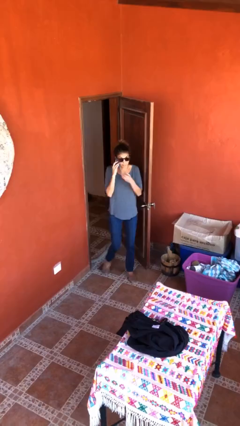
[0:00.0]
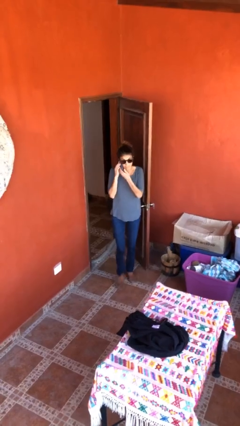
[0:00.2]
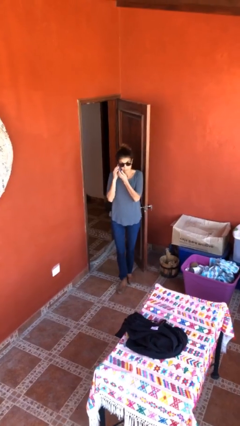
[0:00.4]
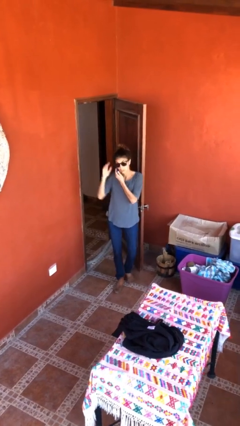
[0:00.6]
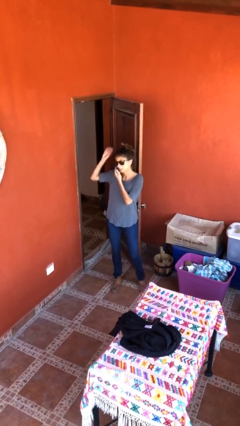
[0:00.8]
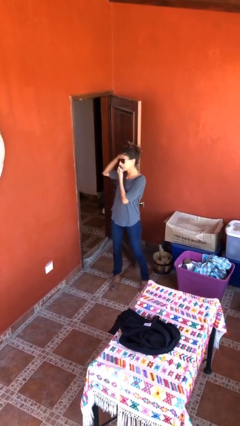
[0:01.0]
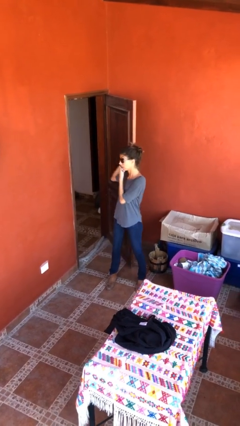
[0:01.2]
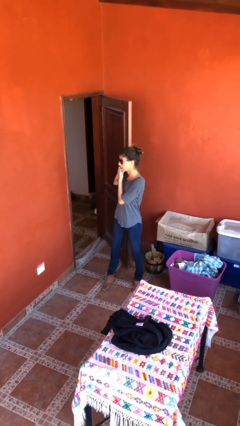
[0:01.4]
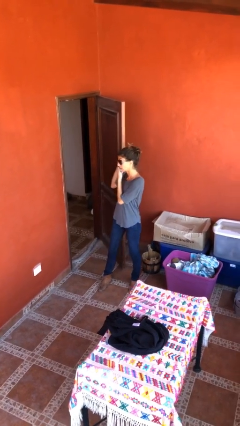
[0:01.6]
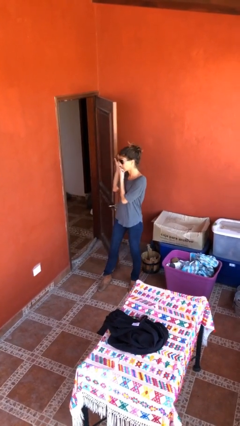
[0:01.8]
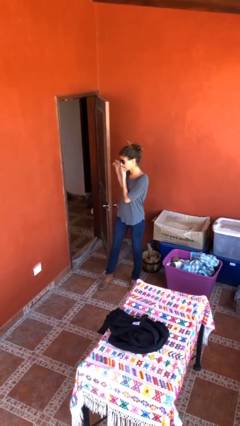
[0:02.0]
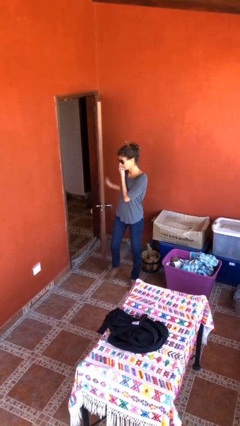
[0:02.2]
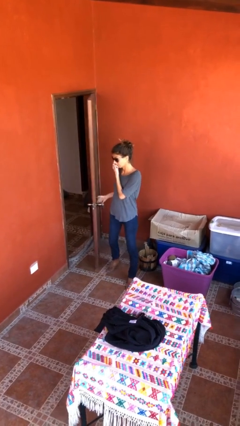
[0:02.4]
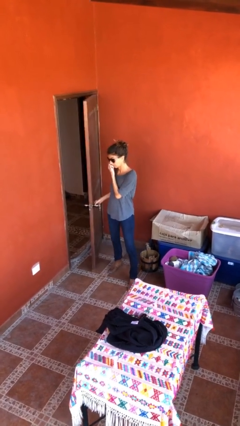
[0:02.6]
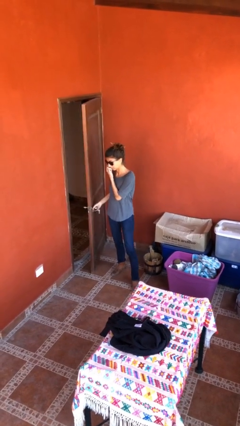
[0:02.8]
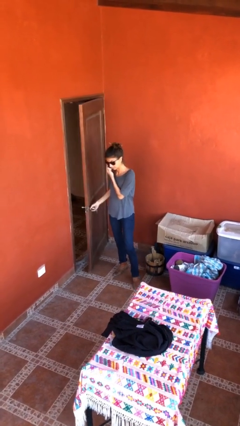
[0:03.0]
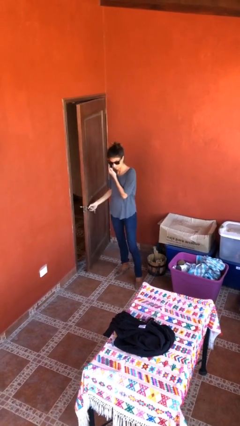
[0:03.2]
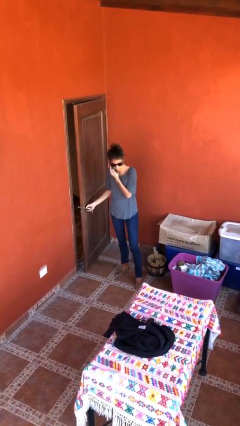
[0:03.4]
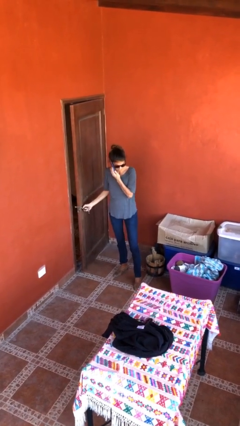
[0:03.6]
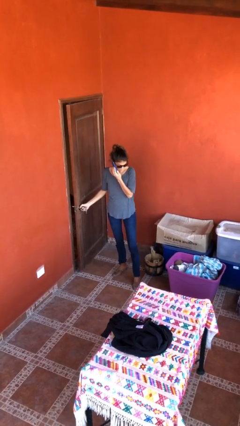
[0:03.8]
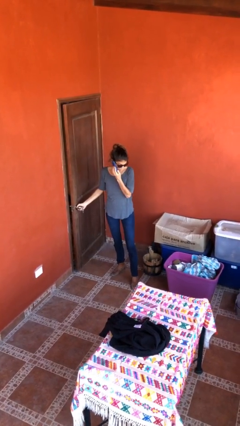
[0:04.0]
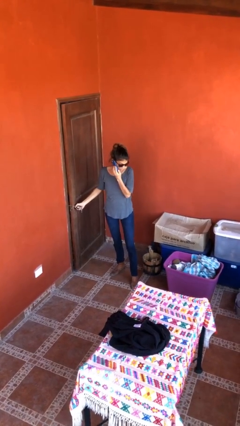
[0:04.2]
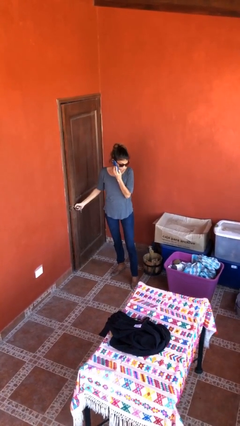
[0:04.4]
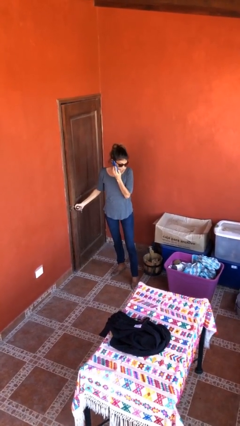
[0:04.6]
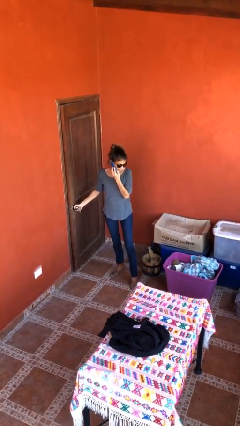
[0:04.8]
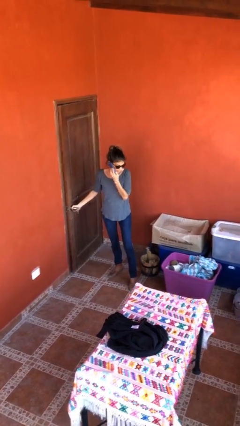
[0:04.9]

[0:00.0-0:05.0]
person closes facility door

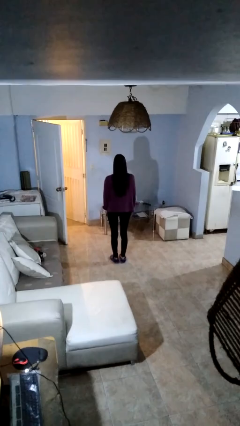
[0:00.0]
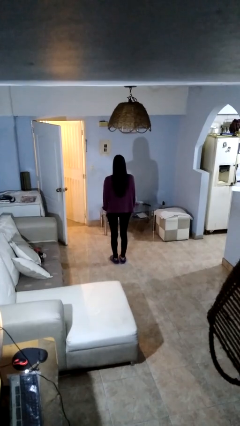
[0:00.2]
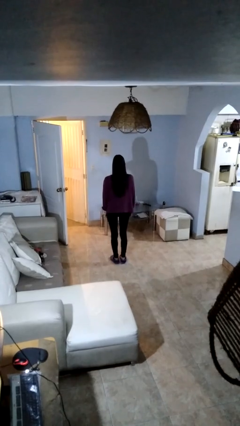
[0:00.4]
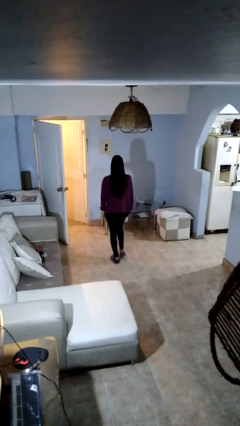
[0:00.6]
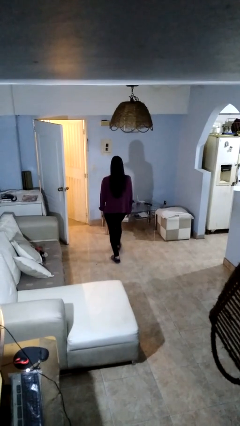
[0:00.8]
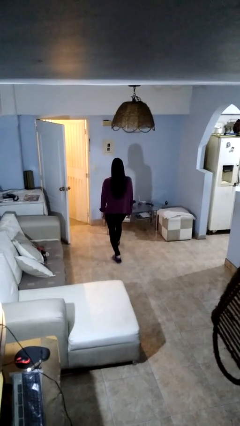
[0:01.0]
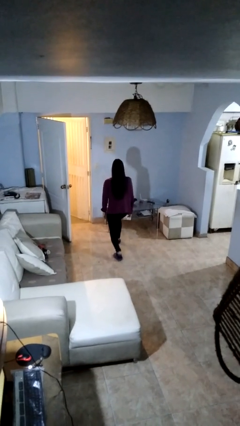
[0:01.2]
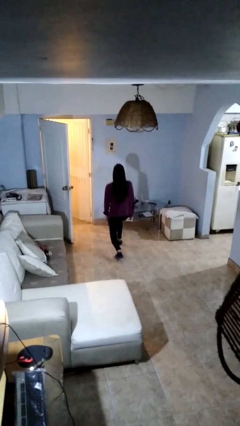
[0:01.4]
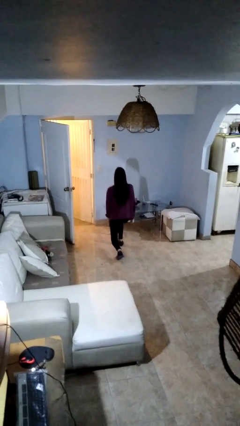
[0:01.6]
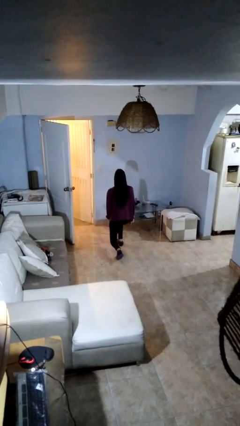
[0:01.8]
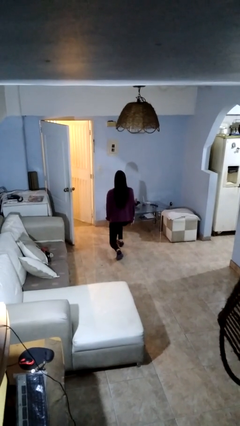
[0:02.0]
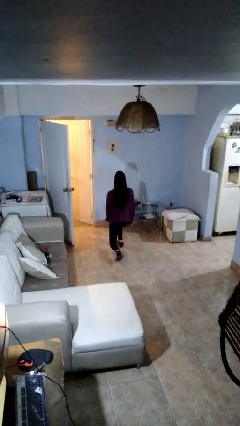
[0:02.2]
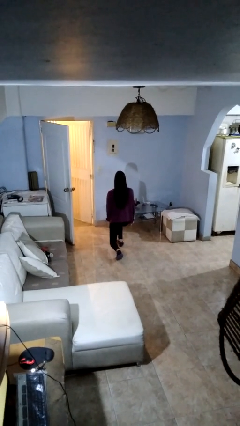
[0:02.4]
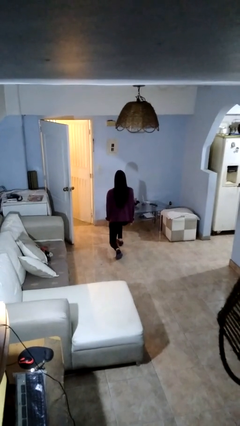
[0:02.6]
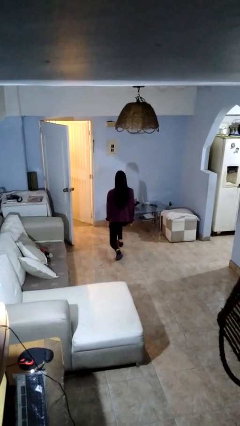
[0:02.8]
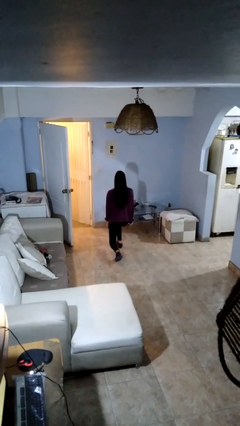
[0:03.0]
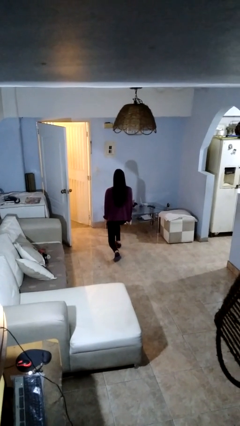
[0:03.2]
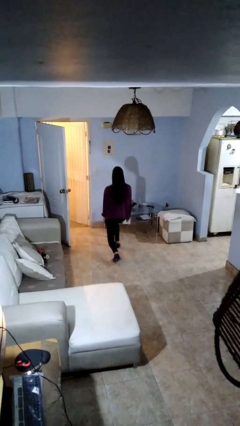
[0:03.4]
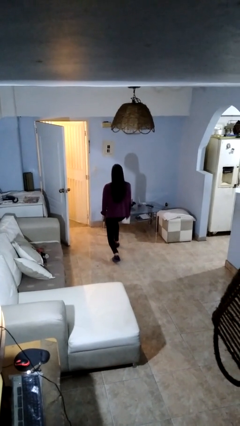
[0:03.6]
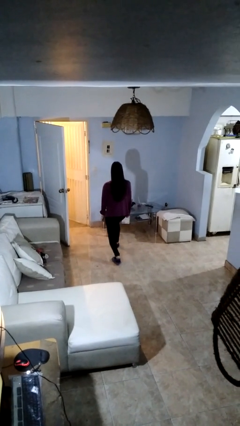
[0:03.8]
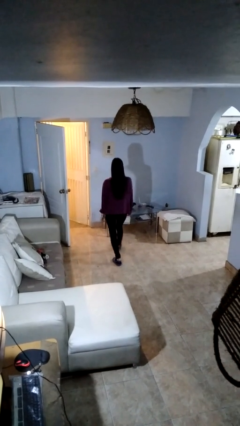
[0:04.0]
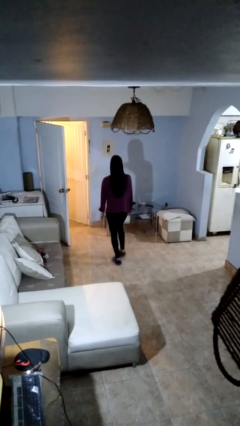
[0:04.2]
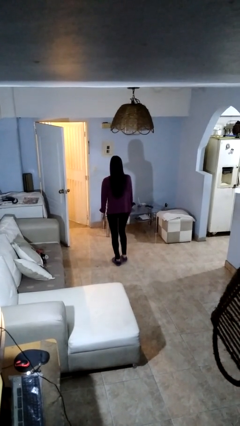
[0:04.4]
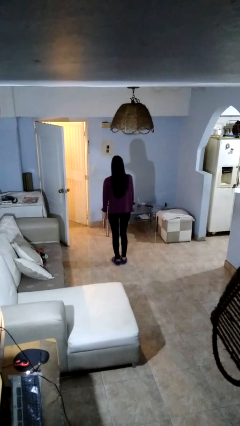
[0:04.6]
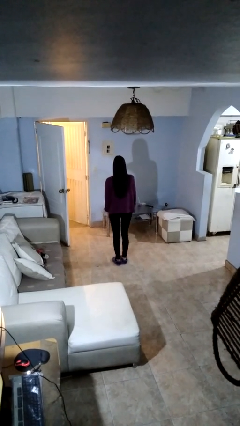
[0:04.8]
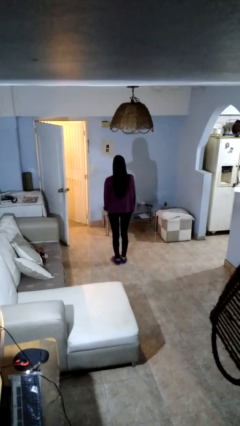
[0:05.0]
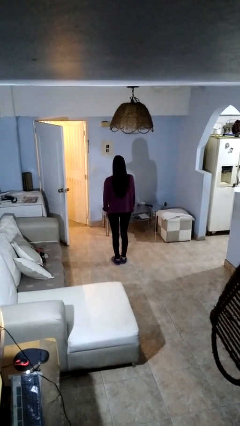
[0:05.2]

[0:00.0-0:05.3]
person exercises with lunges

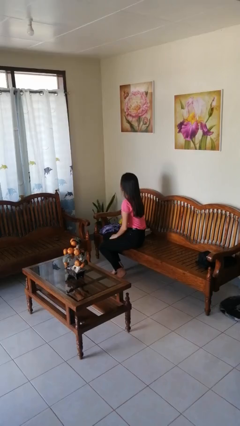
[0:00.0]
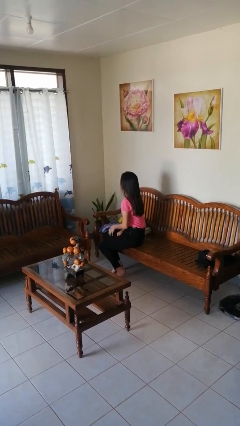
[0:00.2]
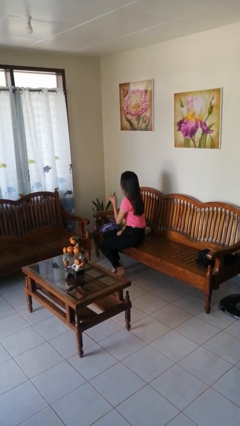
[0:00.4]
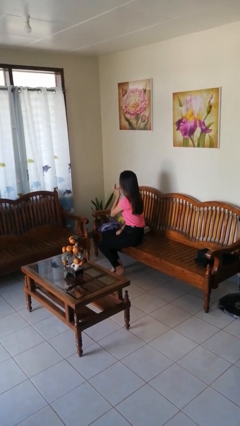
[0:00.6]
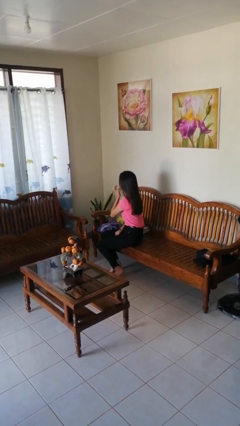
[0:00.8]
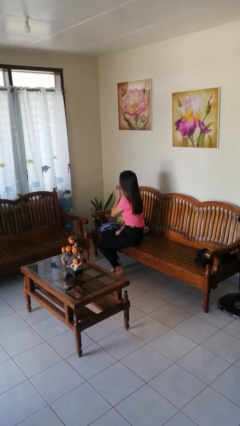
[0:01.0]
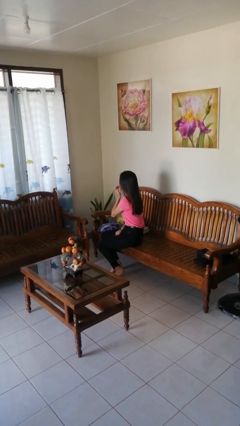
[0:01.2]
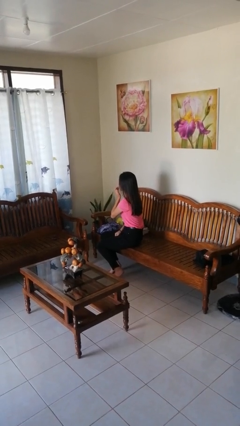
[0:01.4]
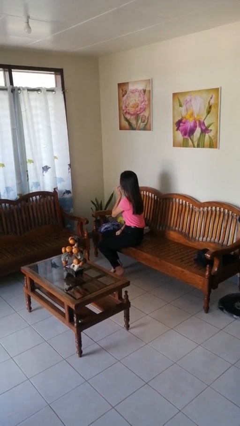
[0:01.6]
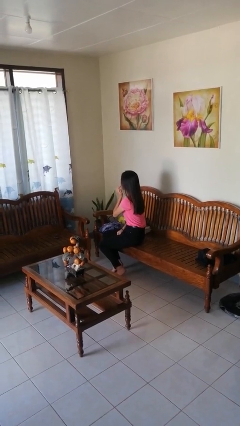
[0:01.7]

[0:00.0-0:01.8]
person licks fingers

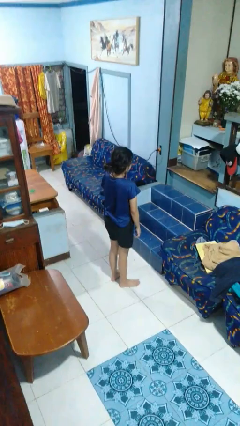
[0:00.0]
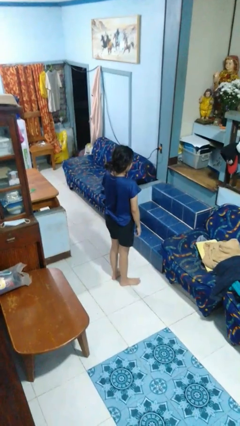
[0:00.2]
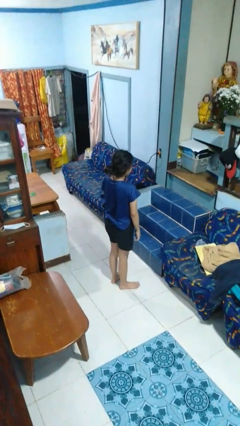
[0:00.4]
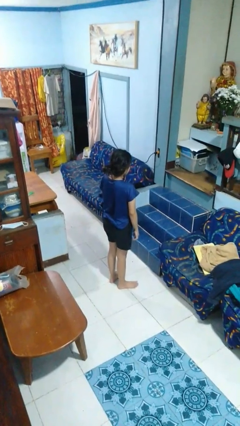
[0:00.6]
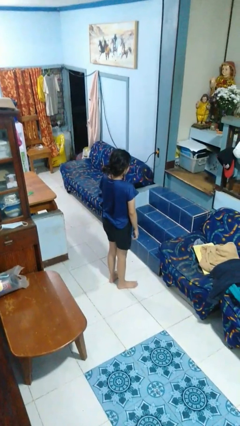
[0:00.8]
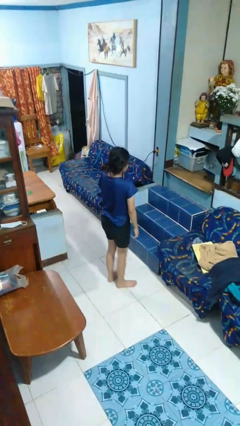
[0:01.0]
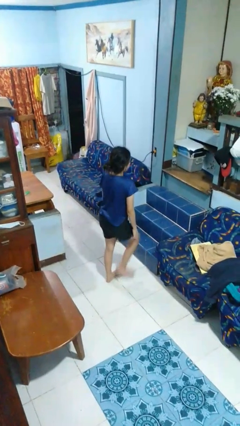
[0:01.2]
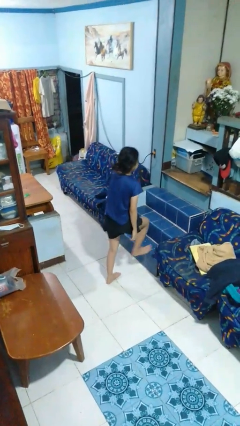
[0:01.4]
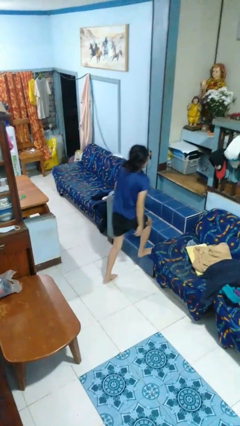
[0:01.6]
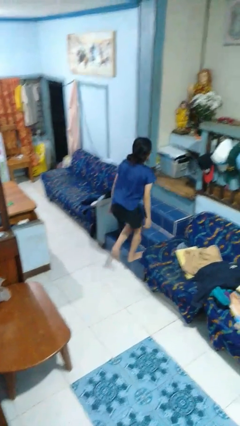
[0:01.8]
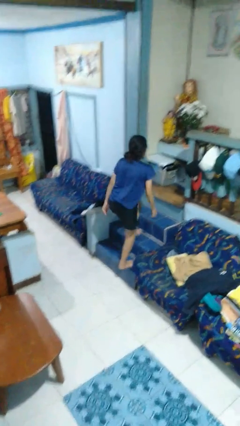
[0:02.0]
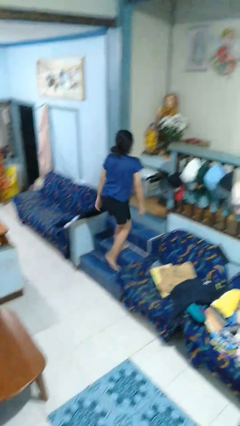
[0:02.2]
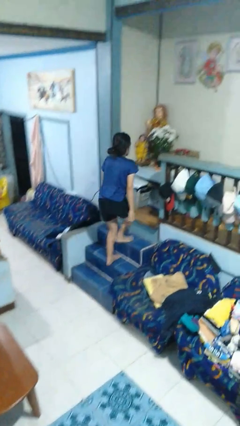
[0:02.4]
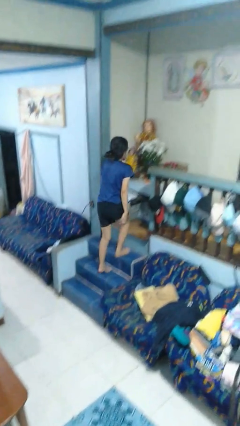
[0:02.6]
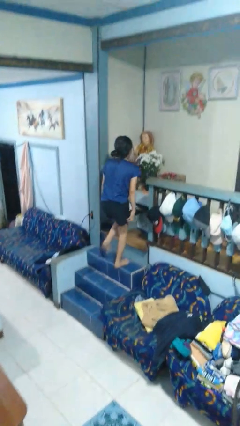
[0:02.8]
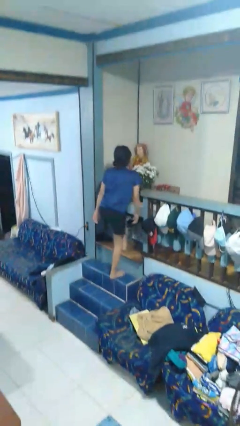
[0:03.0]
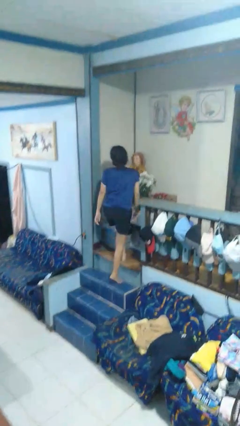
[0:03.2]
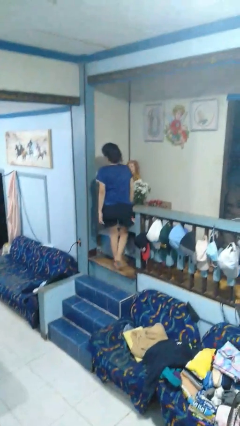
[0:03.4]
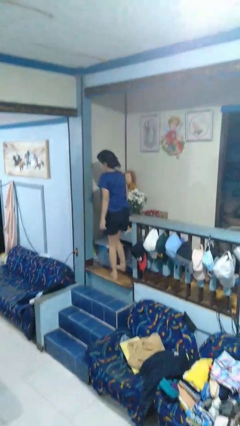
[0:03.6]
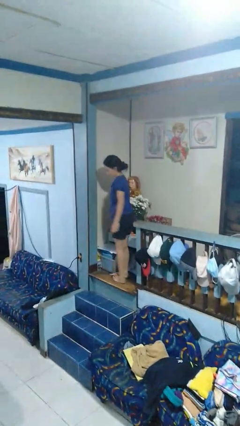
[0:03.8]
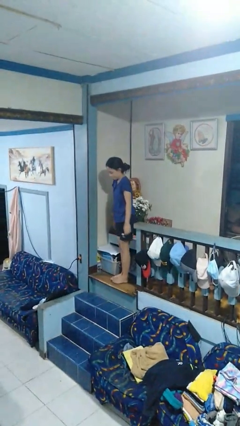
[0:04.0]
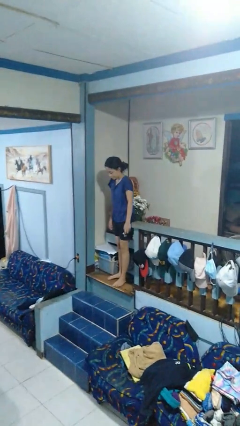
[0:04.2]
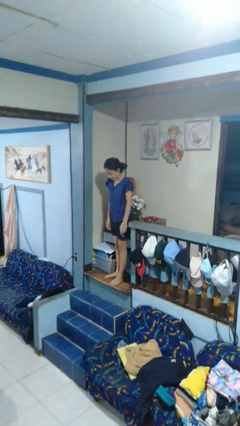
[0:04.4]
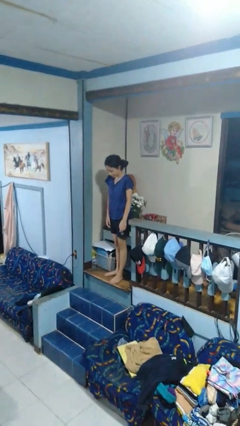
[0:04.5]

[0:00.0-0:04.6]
person climbs up stairs

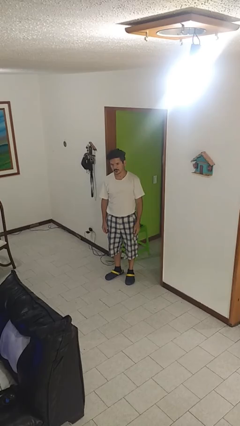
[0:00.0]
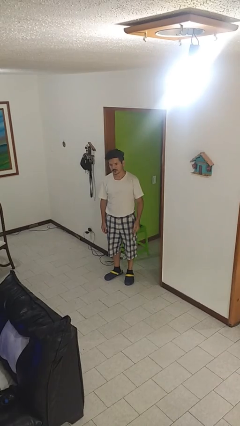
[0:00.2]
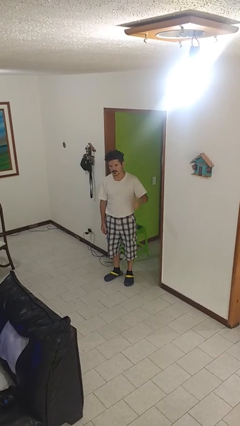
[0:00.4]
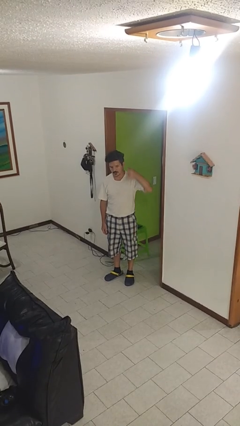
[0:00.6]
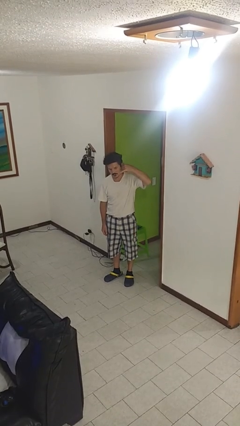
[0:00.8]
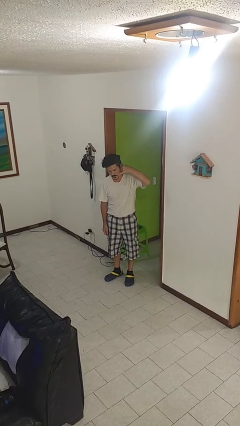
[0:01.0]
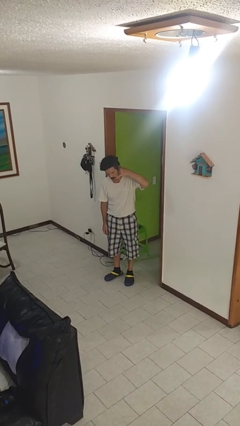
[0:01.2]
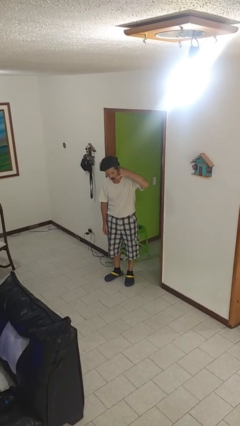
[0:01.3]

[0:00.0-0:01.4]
person gestures call me
